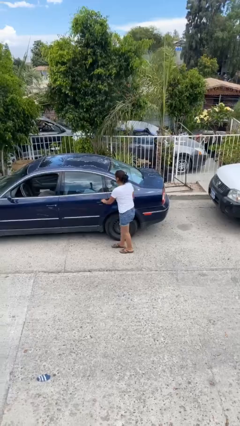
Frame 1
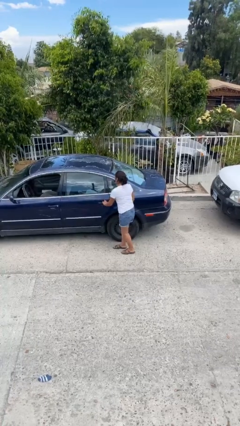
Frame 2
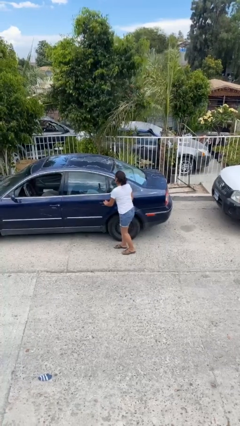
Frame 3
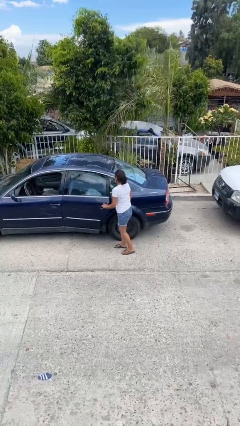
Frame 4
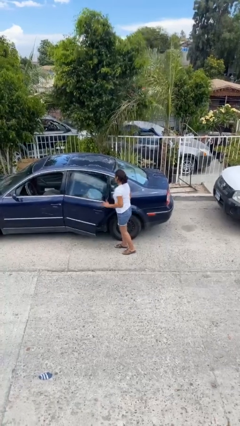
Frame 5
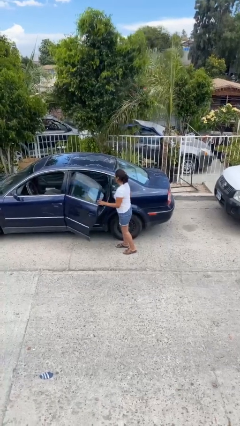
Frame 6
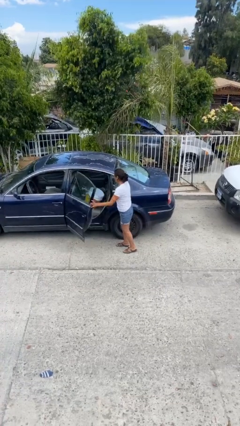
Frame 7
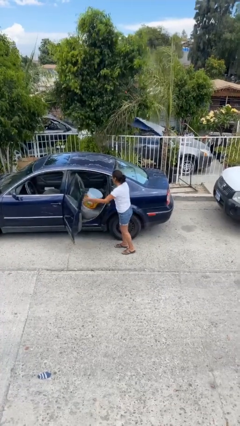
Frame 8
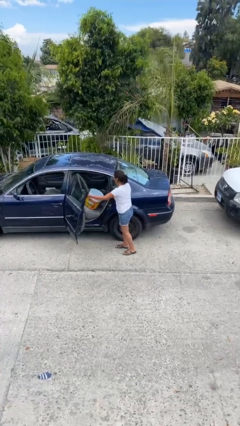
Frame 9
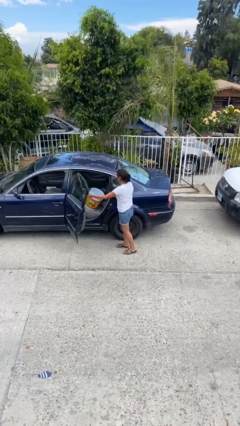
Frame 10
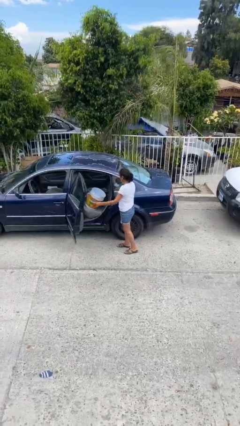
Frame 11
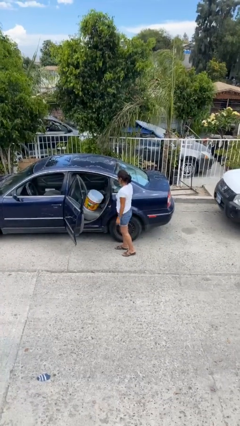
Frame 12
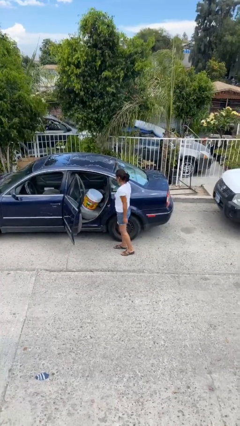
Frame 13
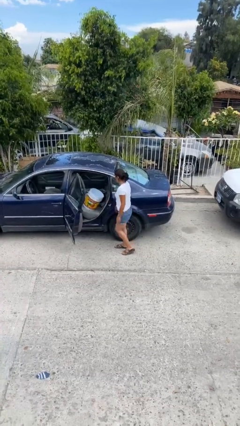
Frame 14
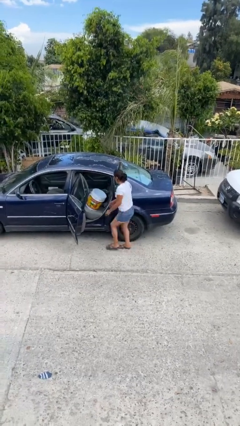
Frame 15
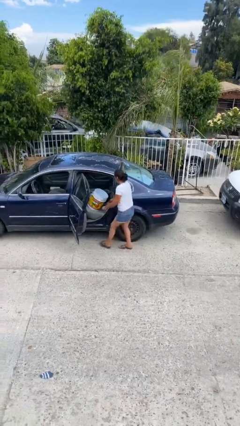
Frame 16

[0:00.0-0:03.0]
person opens car door

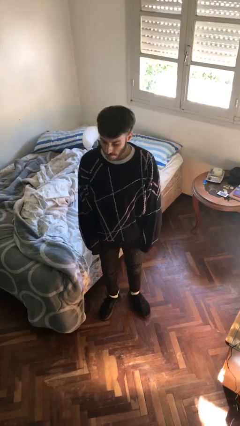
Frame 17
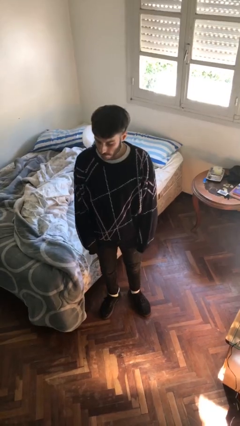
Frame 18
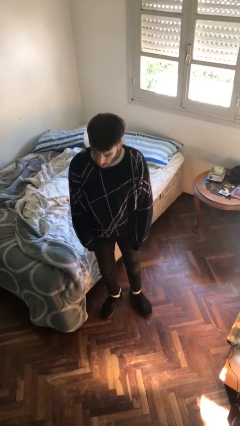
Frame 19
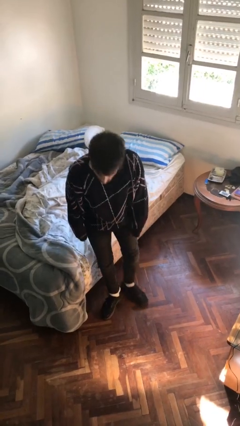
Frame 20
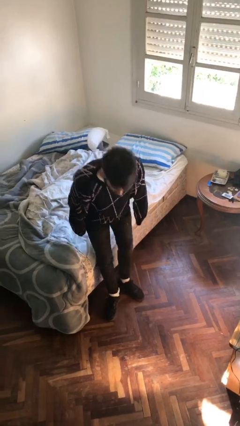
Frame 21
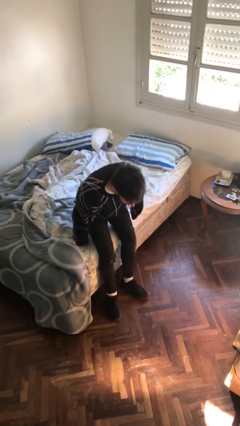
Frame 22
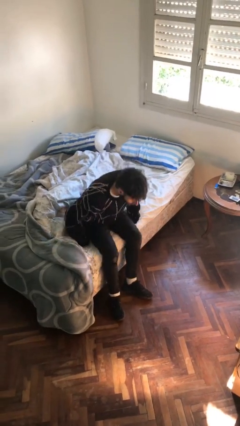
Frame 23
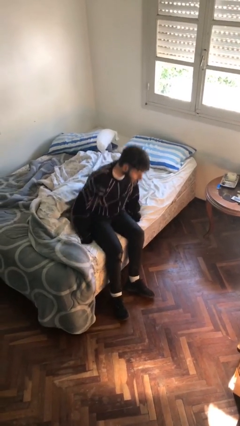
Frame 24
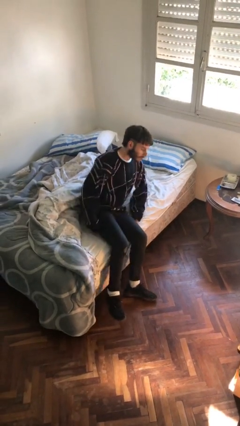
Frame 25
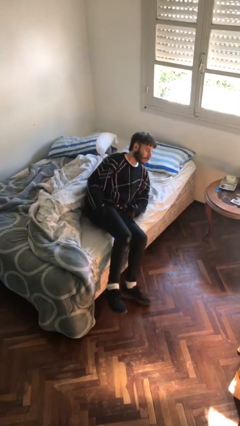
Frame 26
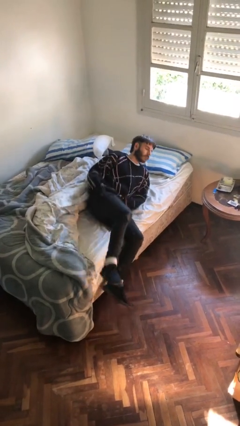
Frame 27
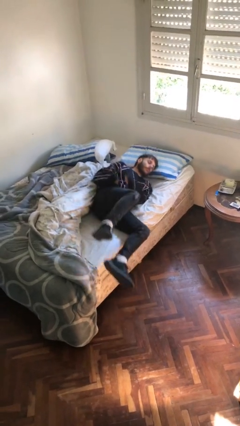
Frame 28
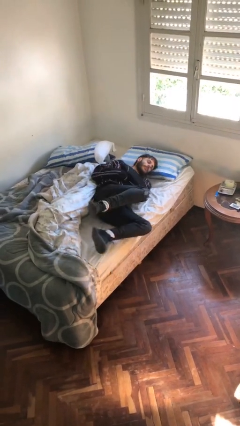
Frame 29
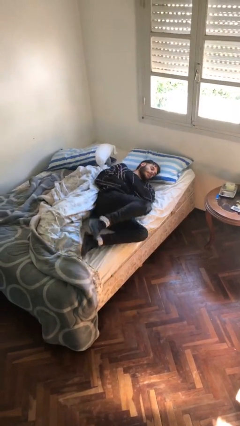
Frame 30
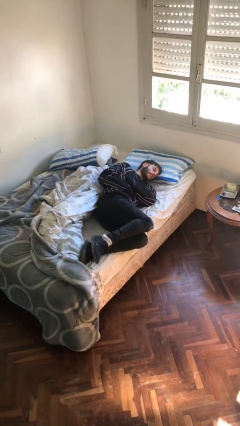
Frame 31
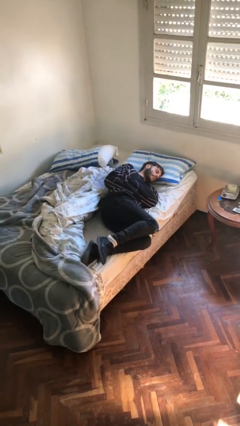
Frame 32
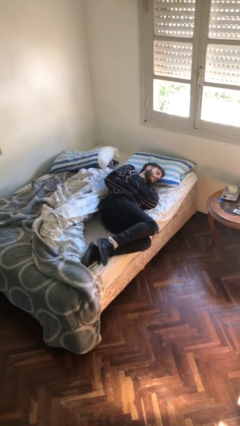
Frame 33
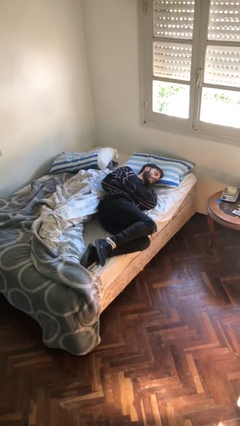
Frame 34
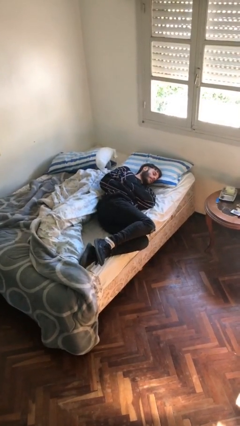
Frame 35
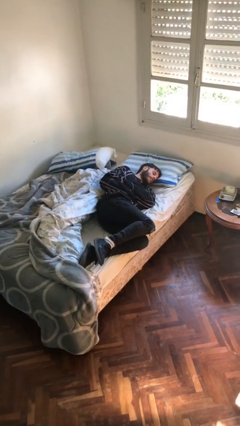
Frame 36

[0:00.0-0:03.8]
person lies down on bed

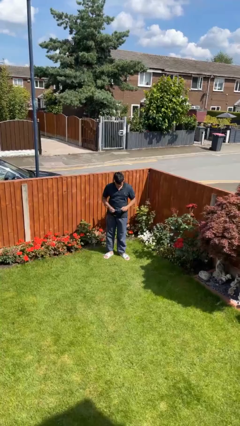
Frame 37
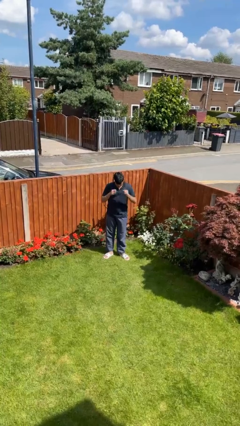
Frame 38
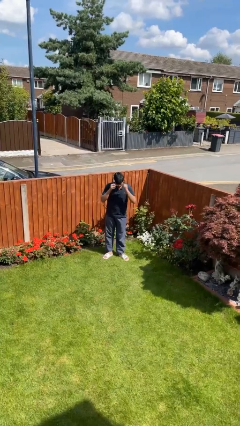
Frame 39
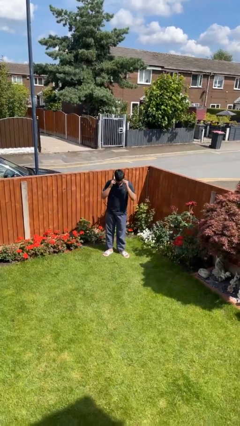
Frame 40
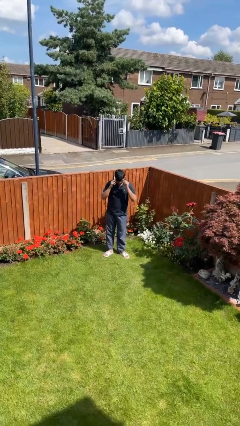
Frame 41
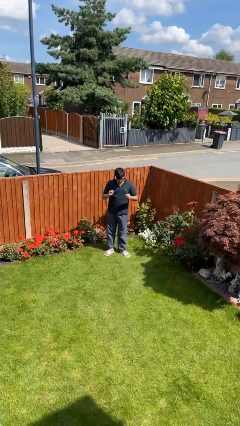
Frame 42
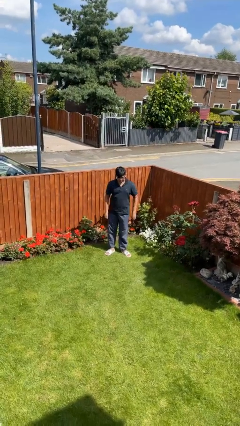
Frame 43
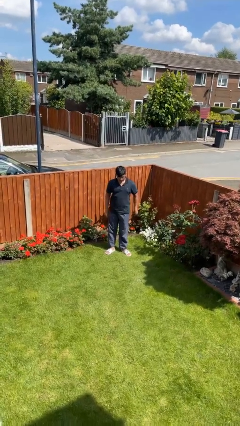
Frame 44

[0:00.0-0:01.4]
person puts on glasses

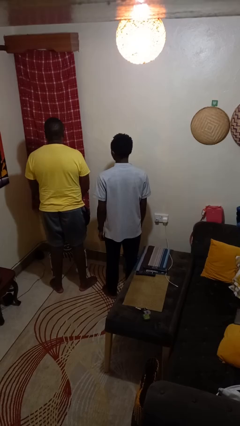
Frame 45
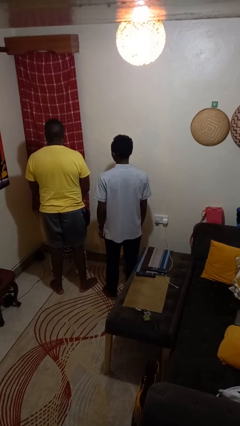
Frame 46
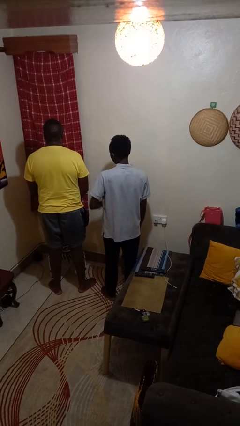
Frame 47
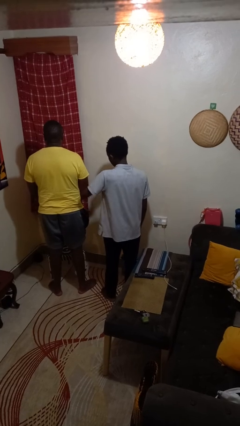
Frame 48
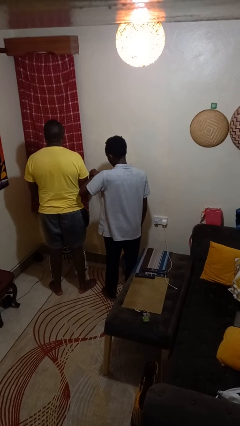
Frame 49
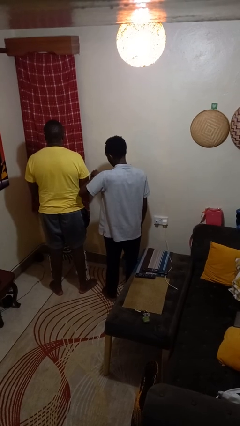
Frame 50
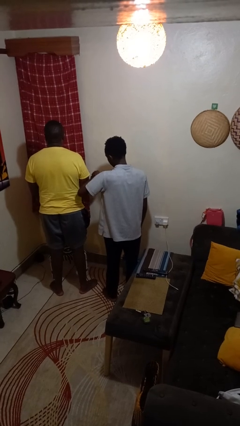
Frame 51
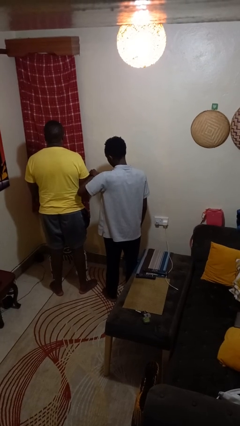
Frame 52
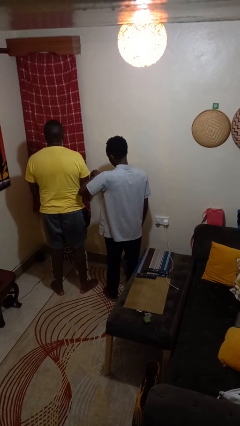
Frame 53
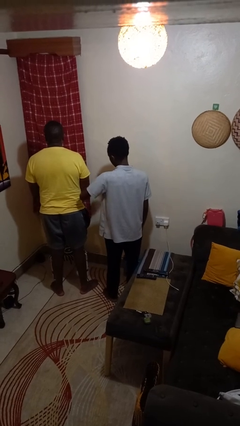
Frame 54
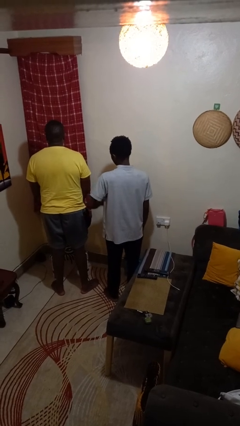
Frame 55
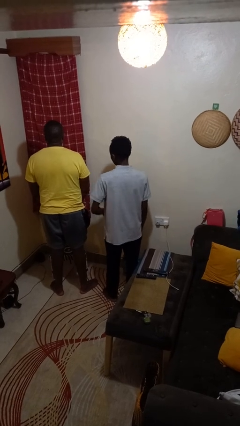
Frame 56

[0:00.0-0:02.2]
person nudges person with elbow

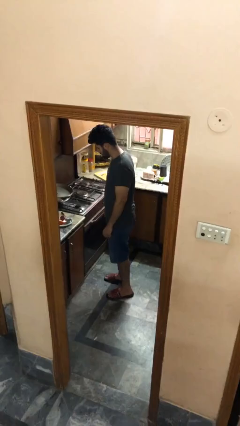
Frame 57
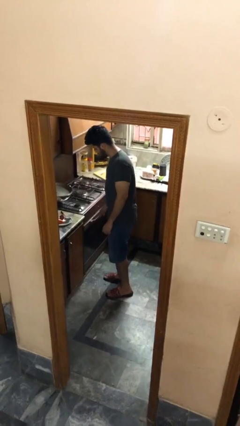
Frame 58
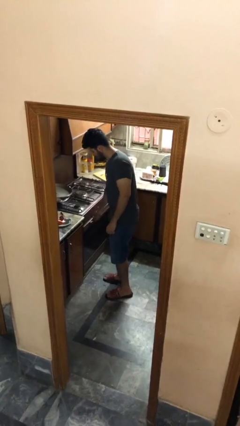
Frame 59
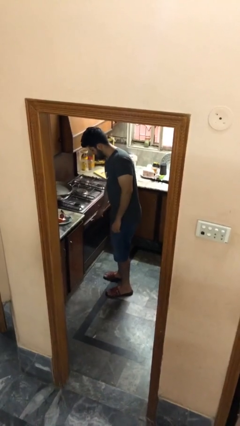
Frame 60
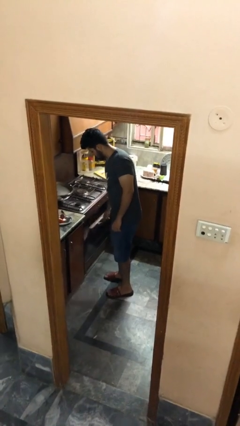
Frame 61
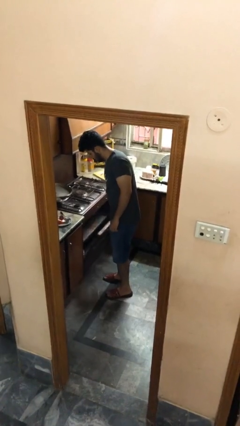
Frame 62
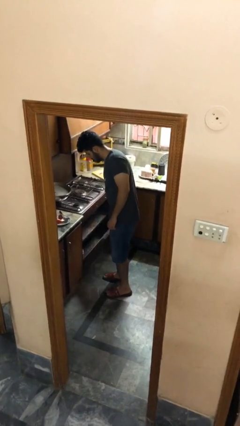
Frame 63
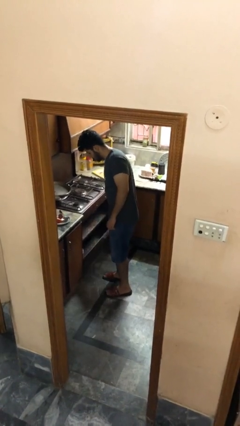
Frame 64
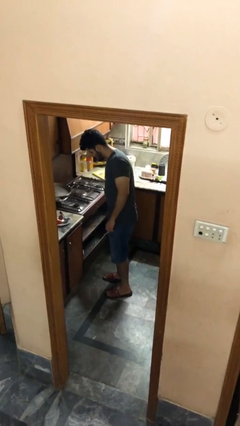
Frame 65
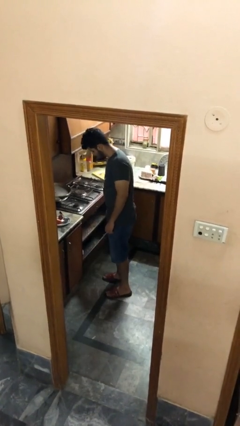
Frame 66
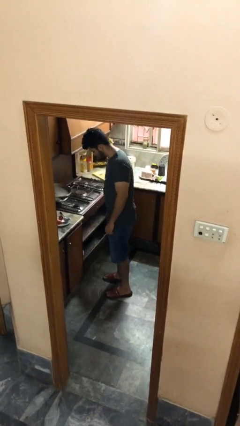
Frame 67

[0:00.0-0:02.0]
person opens oven door

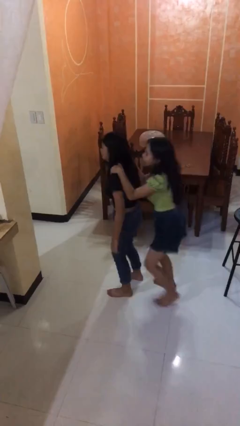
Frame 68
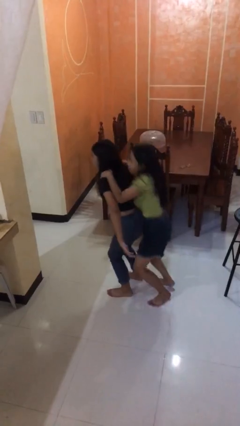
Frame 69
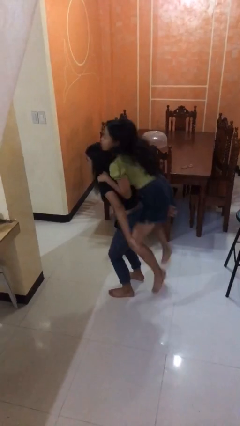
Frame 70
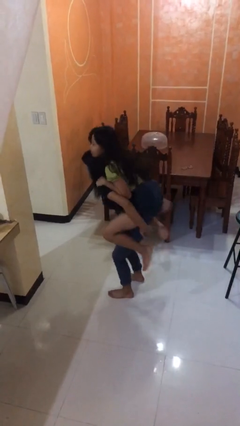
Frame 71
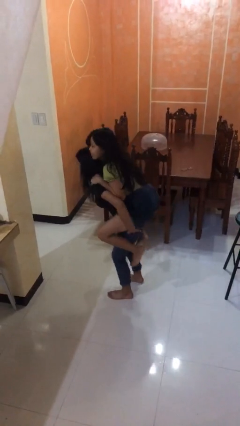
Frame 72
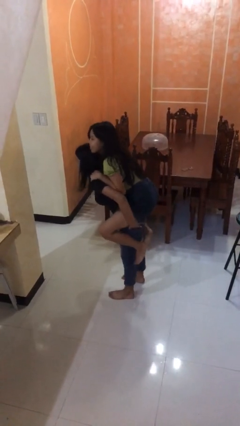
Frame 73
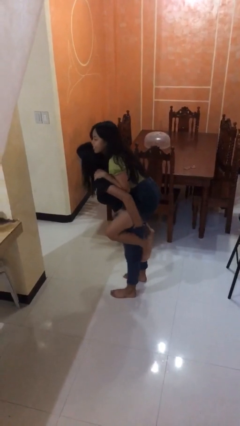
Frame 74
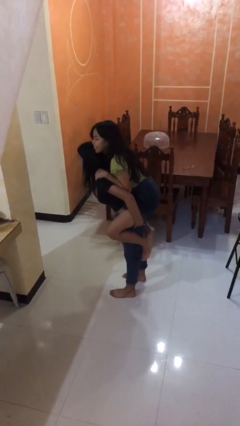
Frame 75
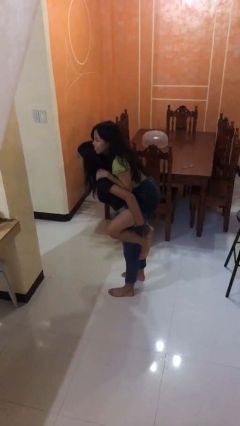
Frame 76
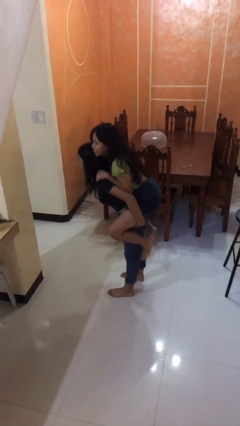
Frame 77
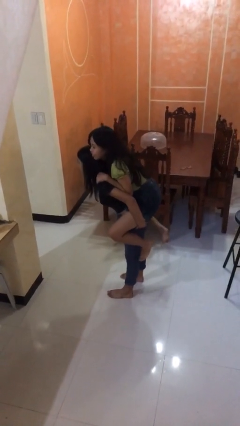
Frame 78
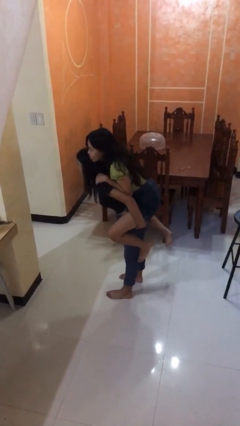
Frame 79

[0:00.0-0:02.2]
person carries person over shoulder

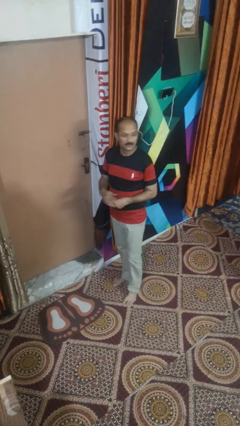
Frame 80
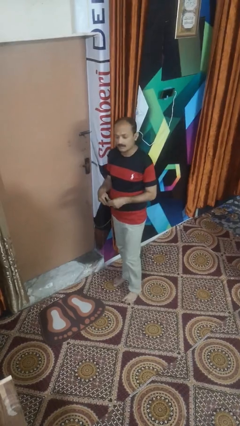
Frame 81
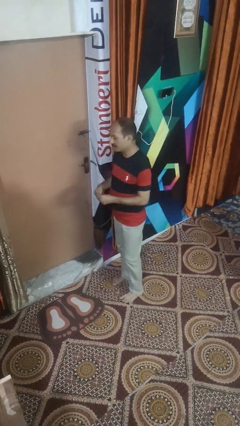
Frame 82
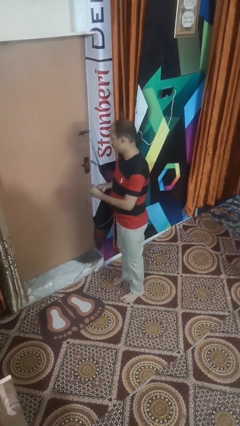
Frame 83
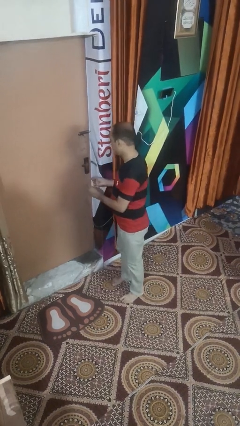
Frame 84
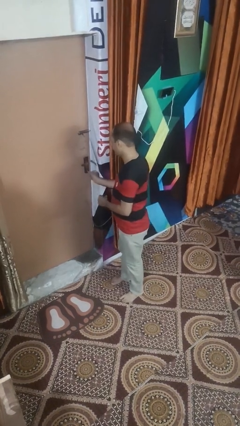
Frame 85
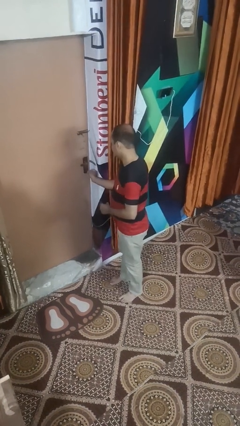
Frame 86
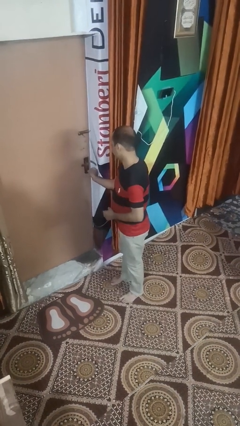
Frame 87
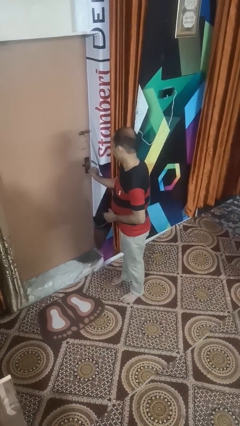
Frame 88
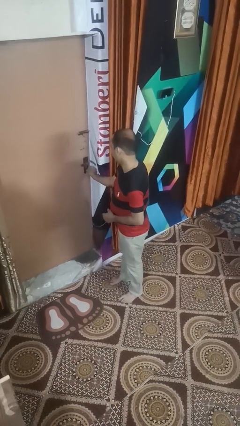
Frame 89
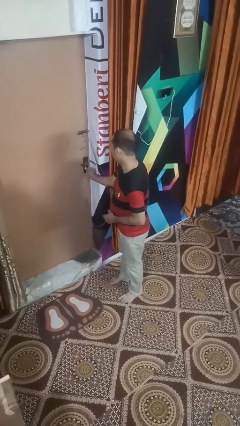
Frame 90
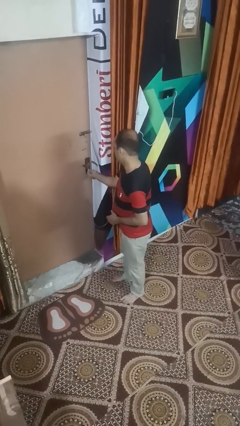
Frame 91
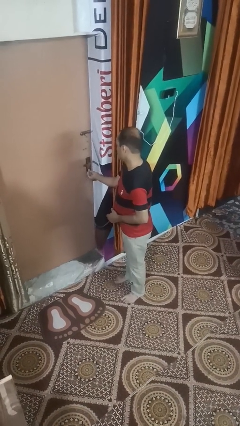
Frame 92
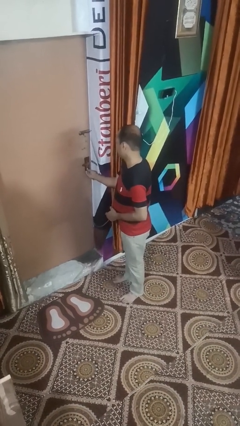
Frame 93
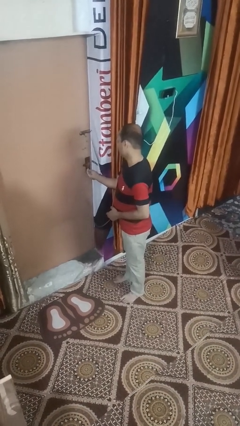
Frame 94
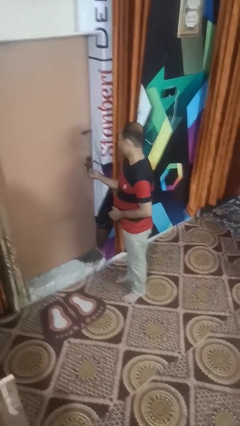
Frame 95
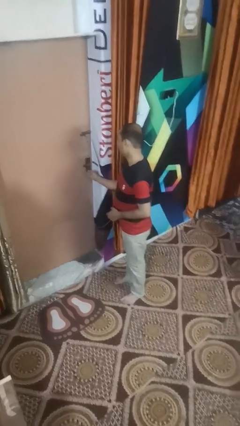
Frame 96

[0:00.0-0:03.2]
person unlocks door with keys
